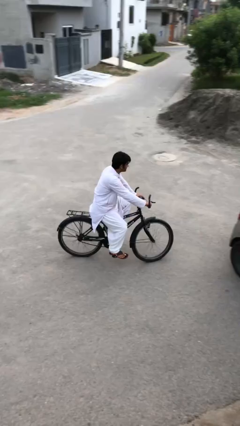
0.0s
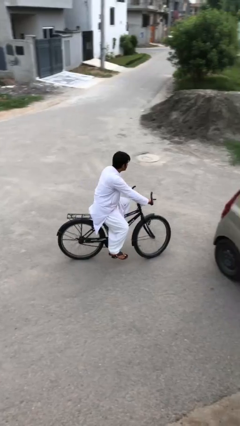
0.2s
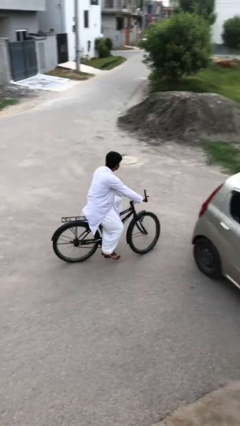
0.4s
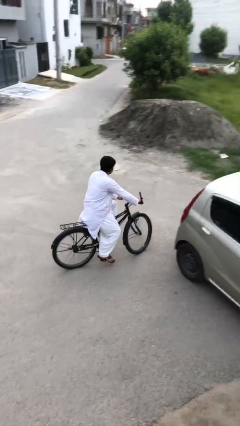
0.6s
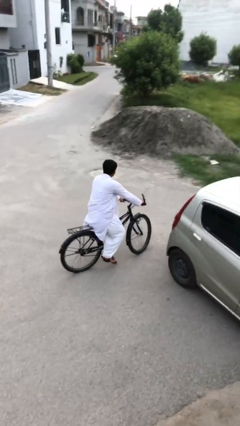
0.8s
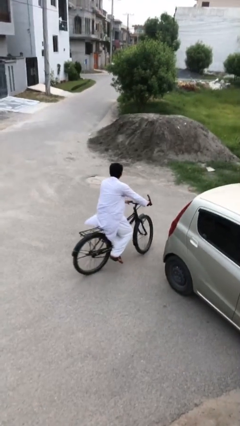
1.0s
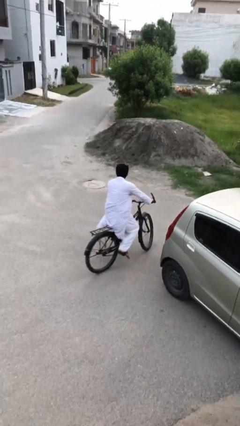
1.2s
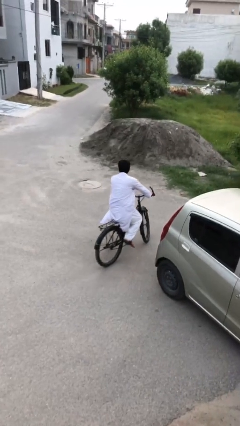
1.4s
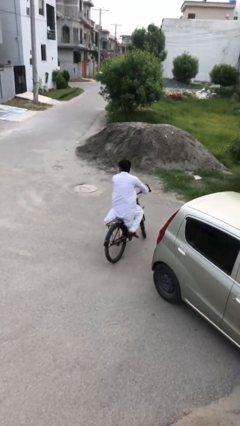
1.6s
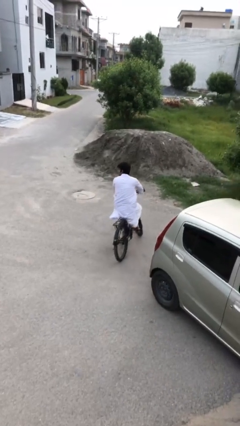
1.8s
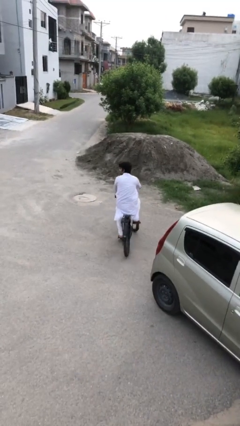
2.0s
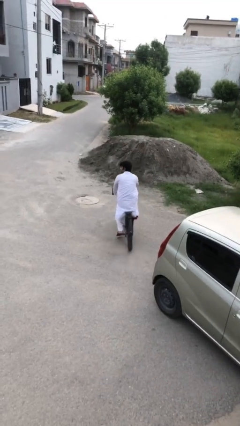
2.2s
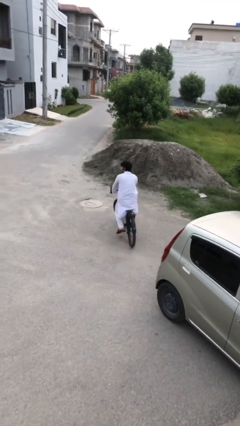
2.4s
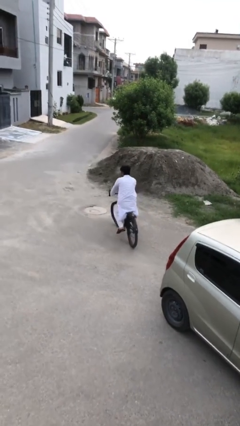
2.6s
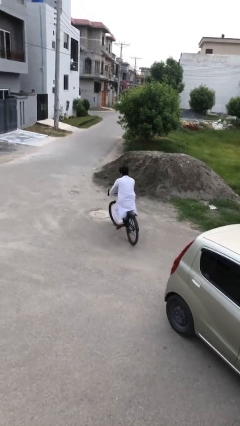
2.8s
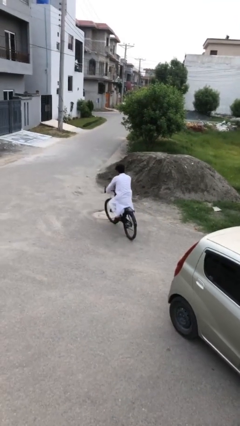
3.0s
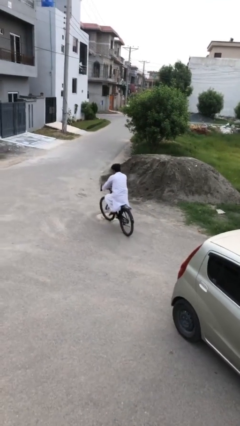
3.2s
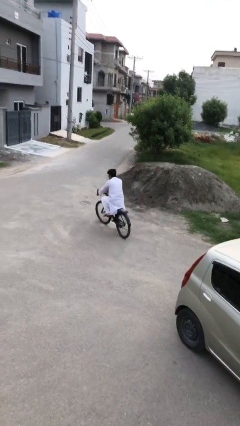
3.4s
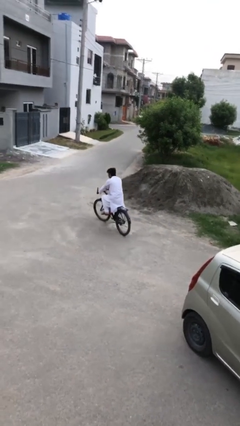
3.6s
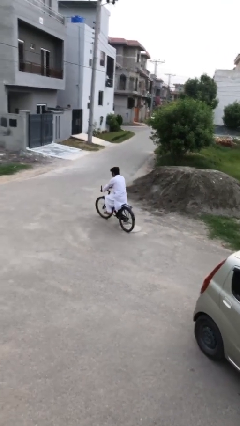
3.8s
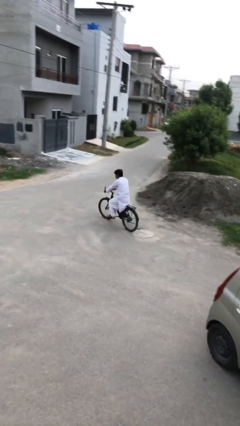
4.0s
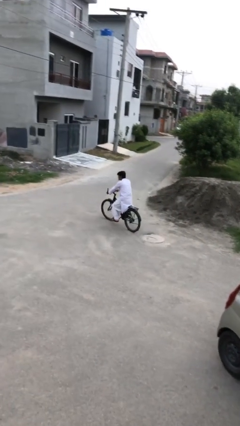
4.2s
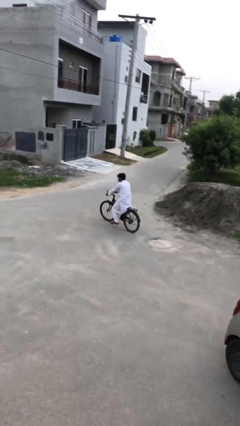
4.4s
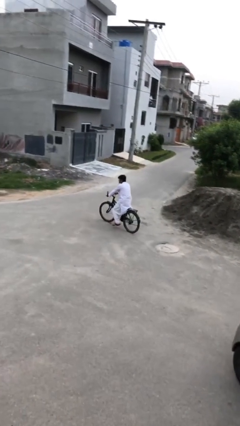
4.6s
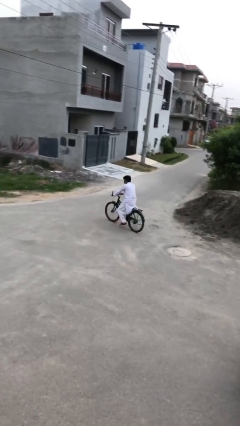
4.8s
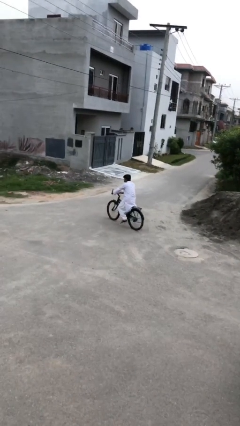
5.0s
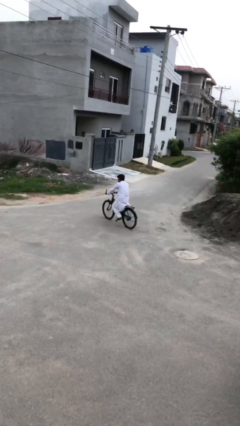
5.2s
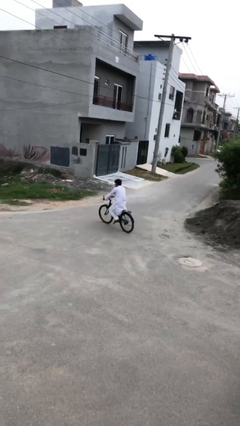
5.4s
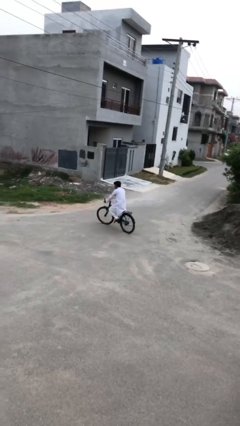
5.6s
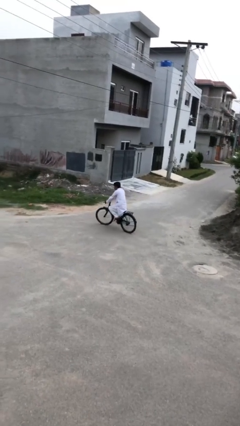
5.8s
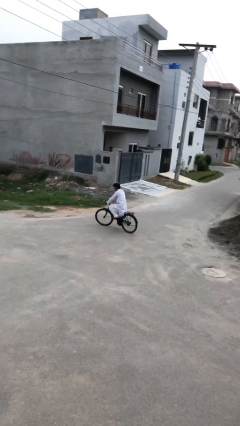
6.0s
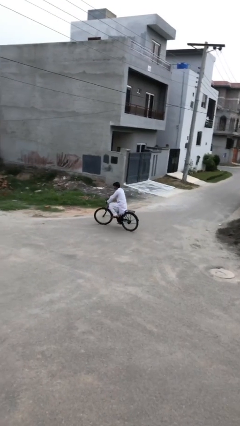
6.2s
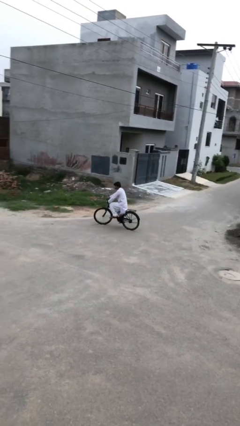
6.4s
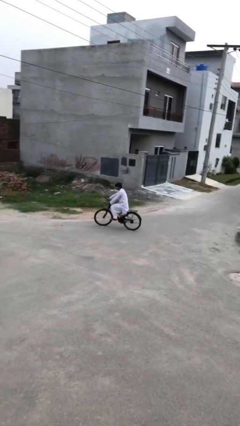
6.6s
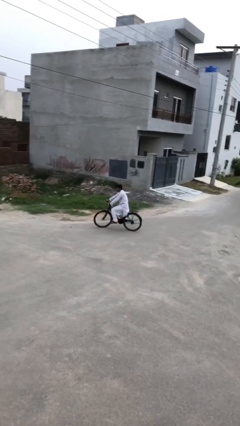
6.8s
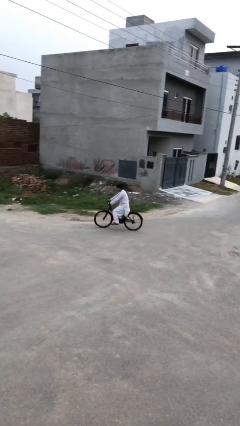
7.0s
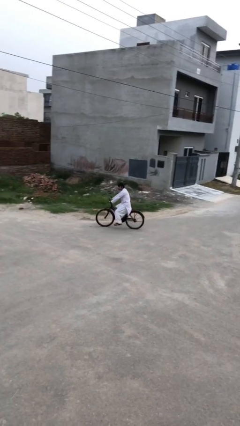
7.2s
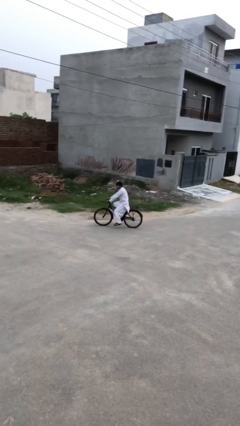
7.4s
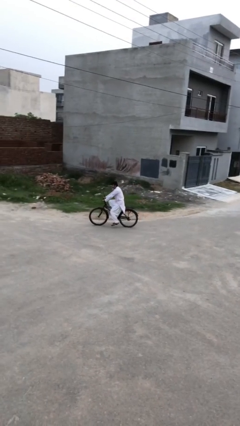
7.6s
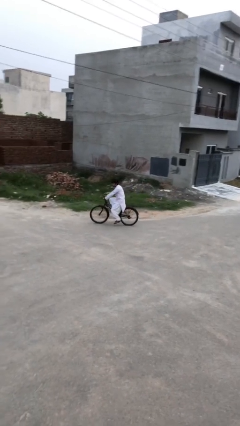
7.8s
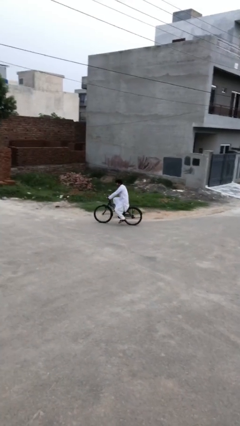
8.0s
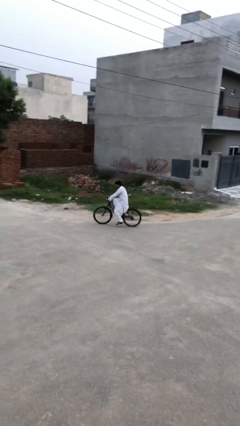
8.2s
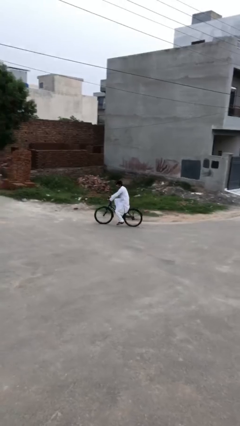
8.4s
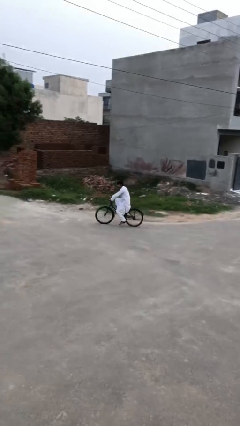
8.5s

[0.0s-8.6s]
person rides bicycle

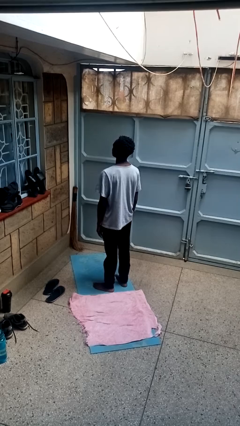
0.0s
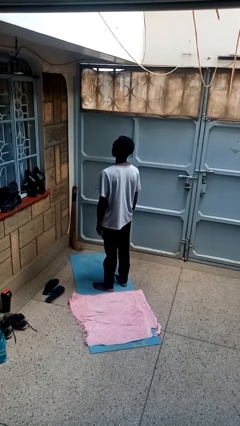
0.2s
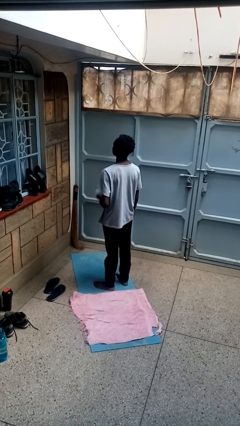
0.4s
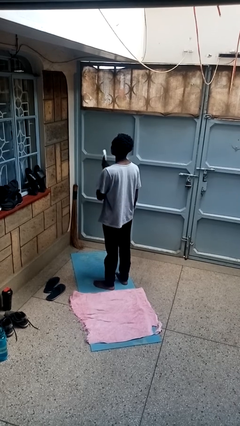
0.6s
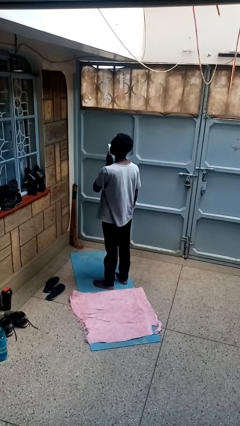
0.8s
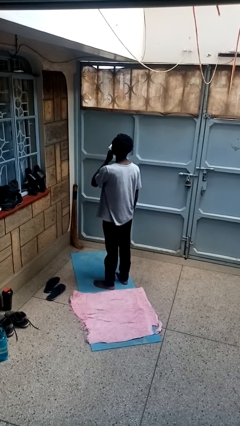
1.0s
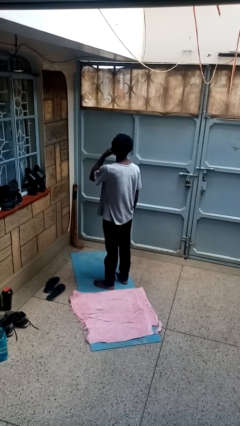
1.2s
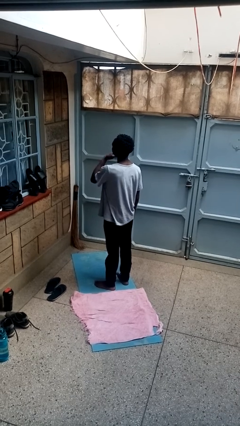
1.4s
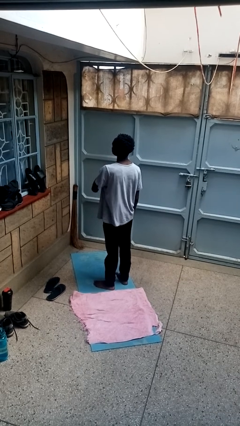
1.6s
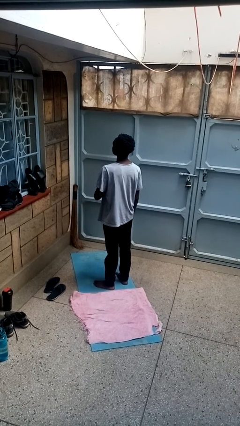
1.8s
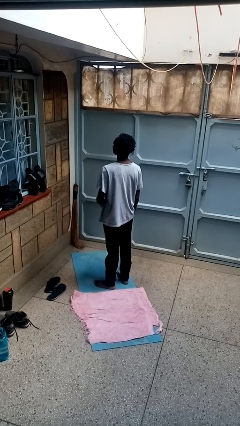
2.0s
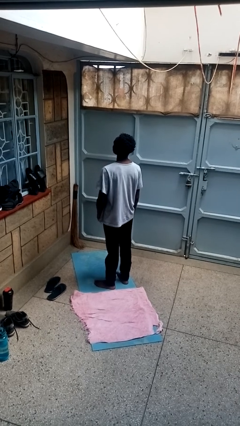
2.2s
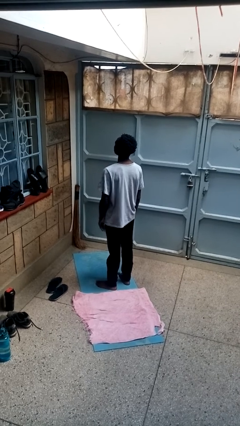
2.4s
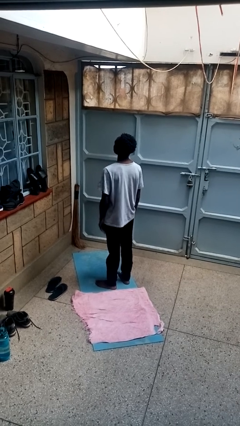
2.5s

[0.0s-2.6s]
person wipes mouth with napkin

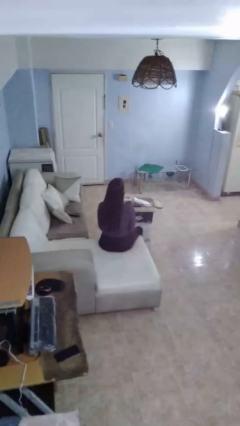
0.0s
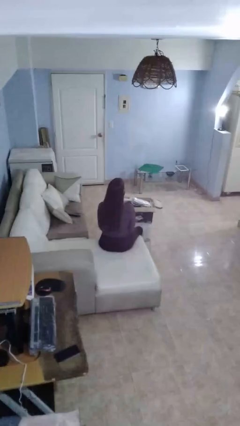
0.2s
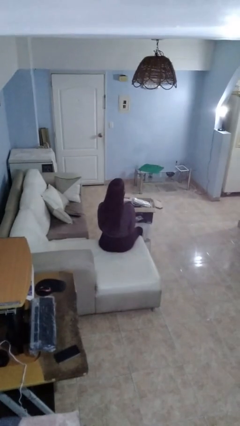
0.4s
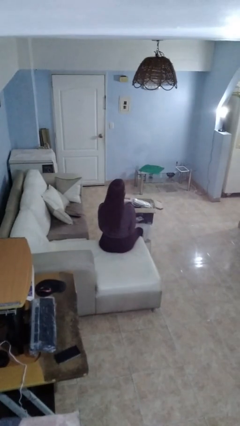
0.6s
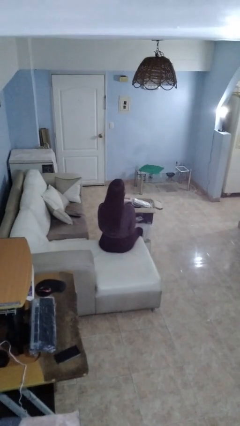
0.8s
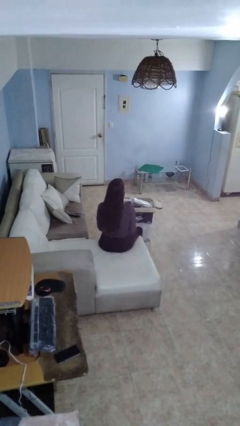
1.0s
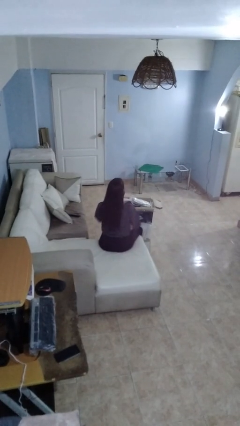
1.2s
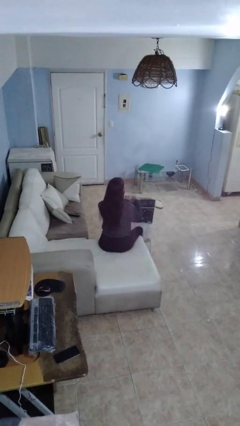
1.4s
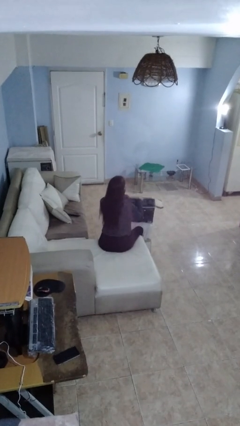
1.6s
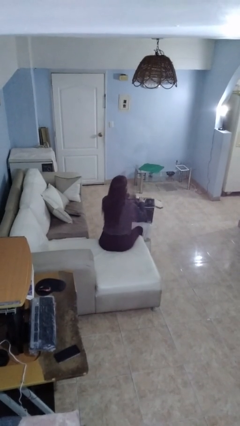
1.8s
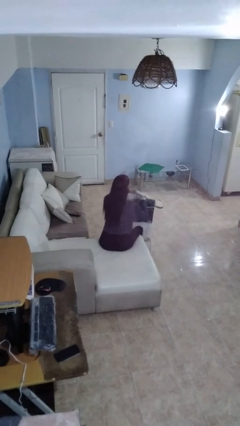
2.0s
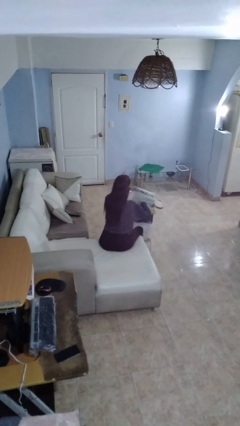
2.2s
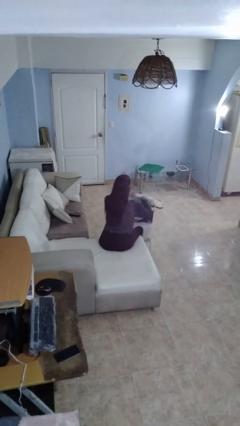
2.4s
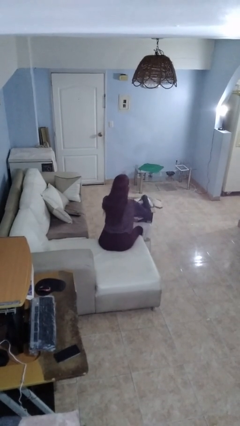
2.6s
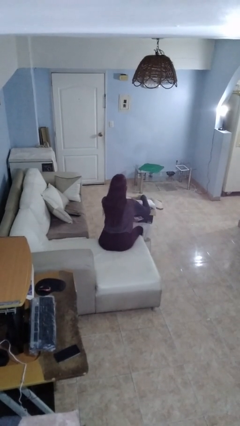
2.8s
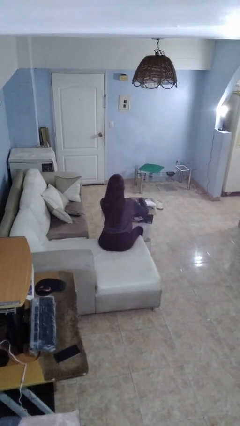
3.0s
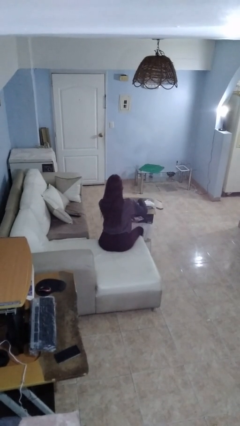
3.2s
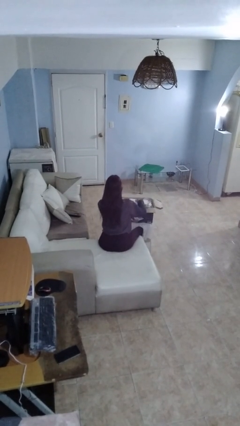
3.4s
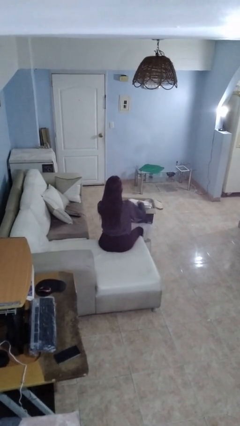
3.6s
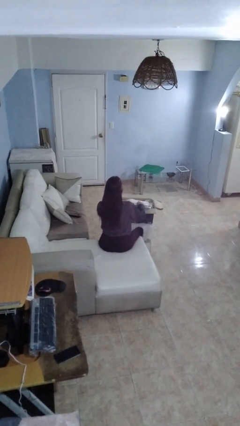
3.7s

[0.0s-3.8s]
person searches in box

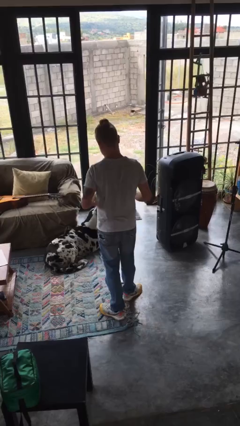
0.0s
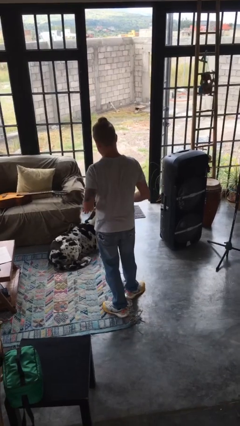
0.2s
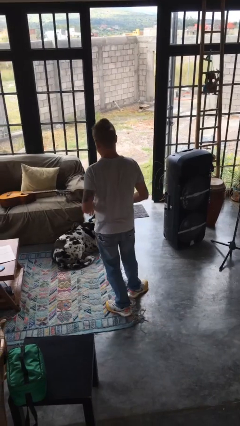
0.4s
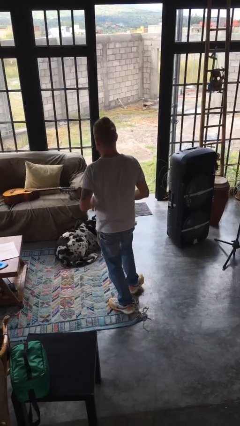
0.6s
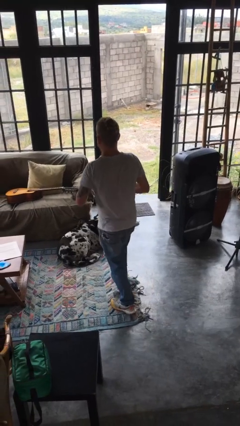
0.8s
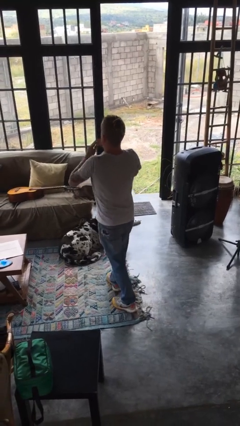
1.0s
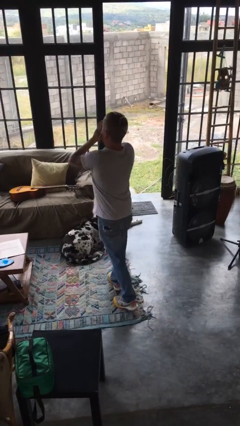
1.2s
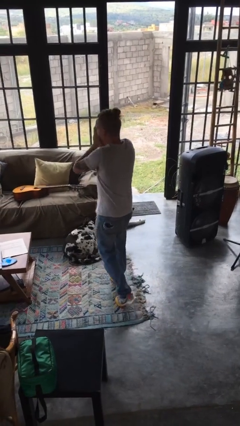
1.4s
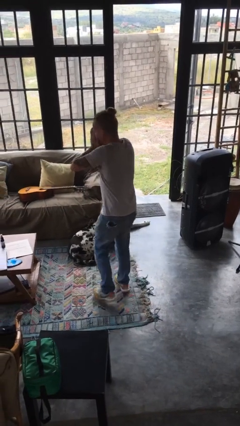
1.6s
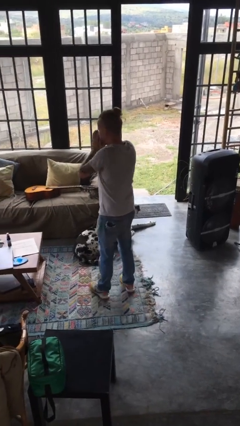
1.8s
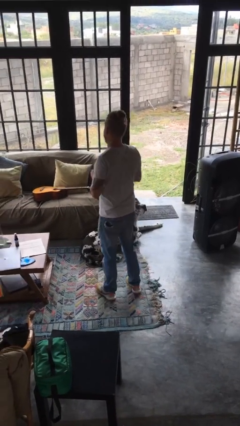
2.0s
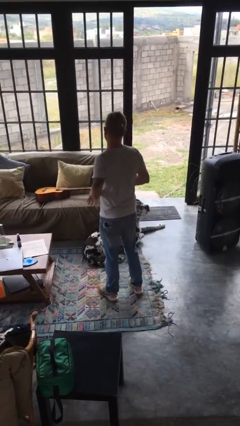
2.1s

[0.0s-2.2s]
person sneezes into hand

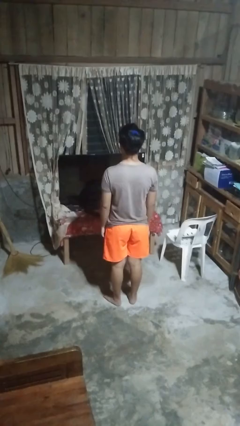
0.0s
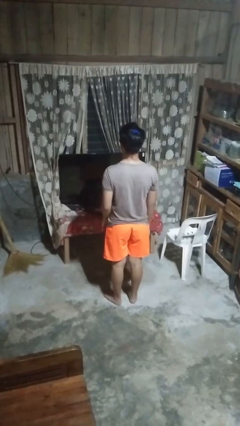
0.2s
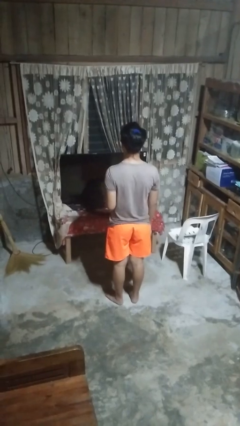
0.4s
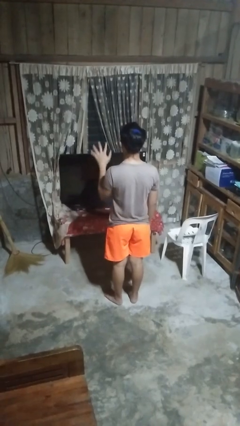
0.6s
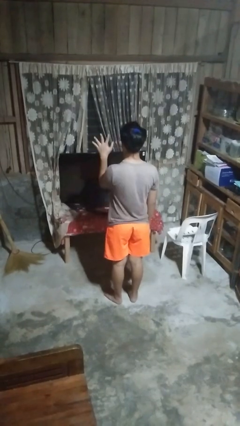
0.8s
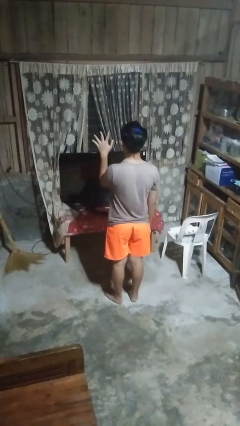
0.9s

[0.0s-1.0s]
person gestures number five
